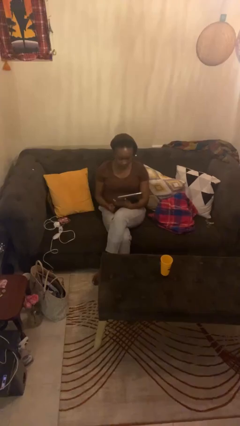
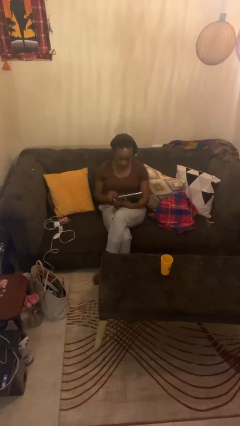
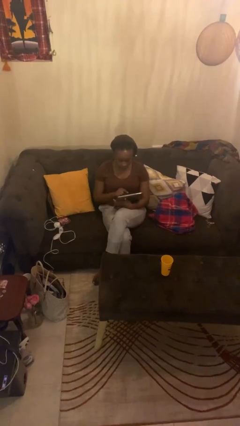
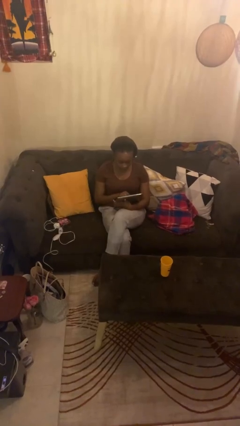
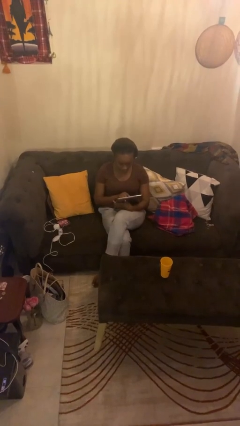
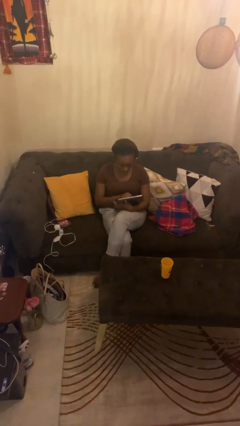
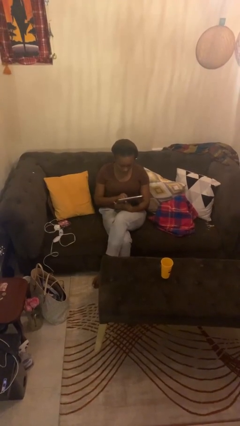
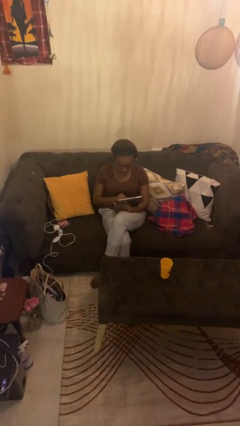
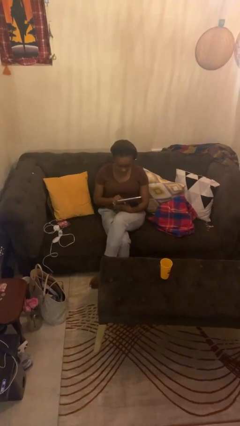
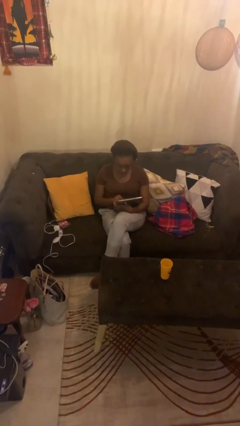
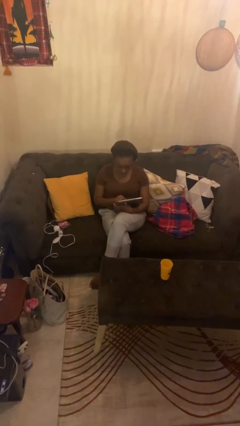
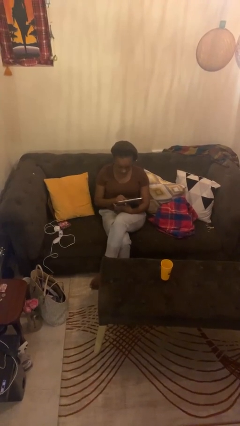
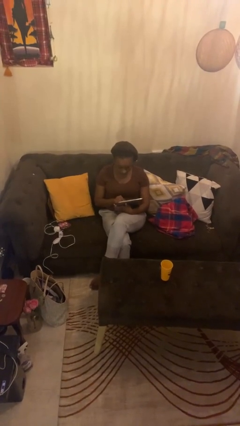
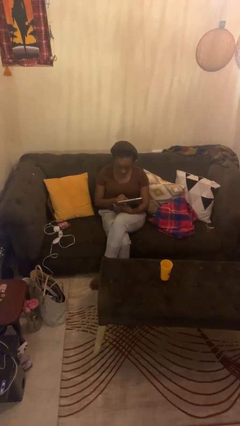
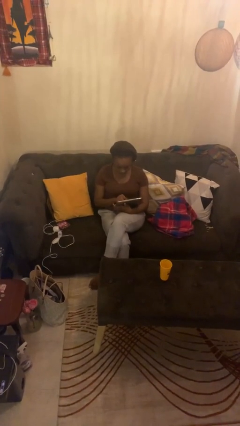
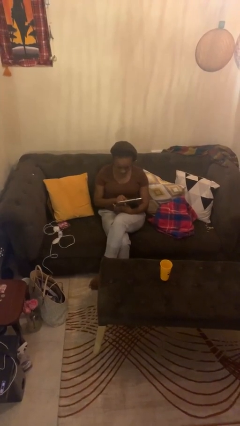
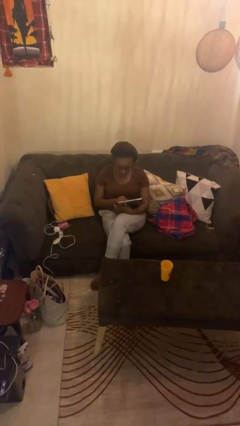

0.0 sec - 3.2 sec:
person interacts with tablet

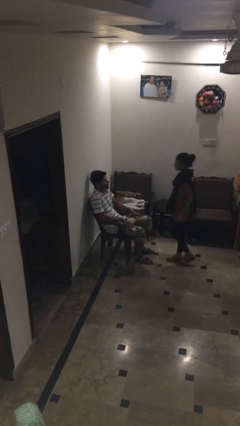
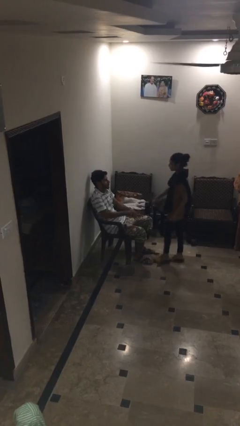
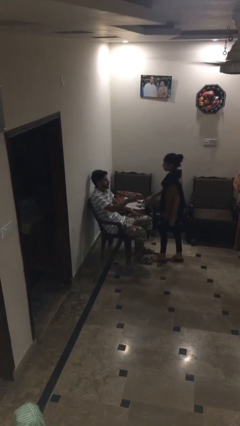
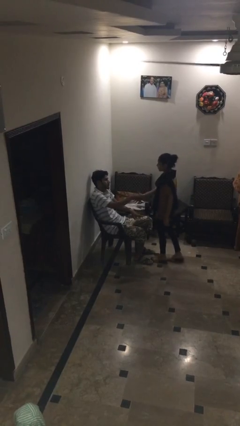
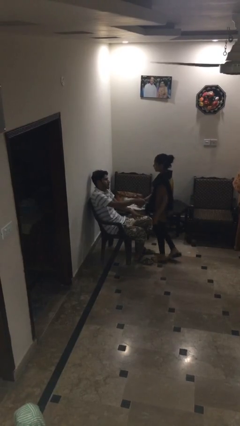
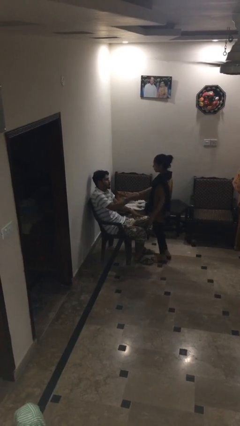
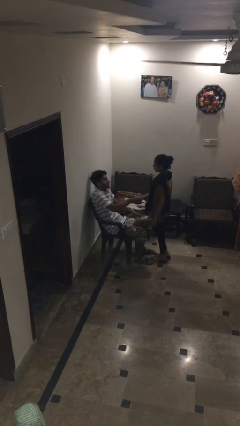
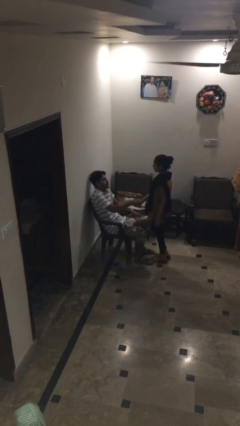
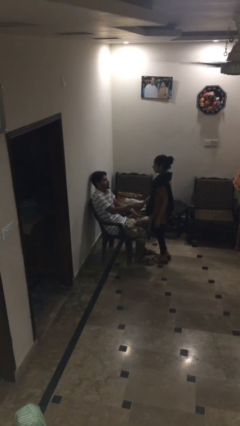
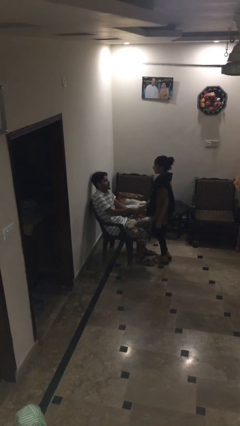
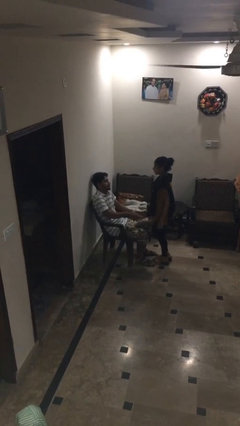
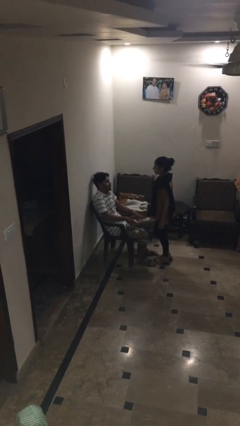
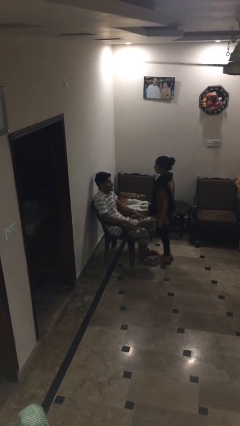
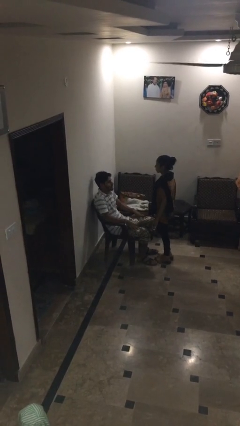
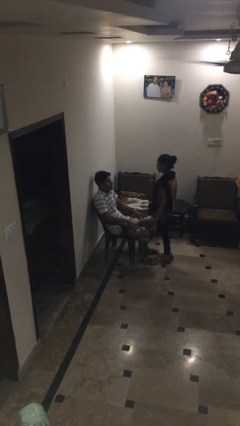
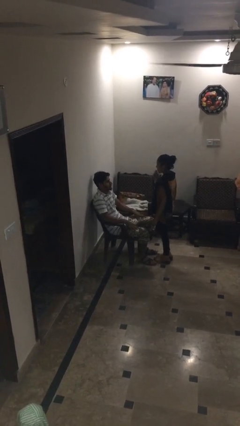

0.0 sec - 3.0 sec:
person shakes hand

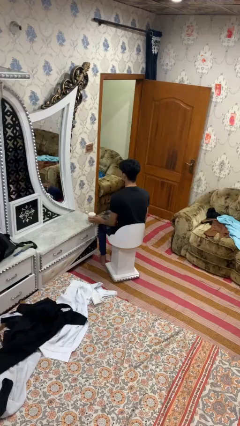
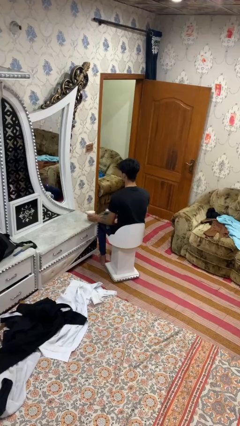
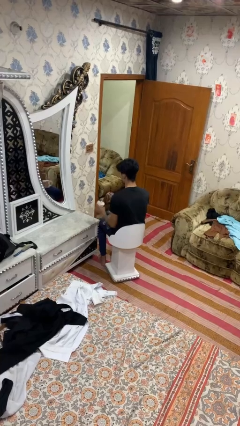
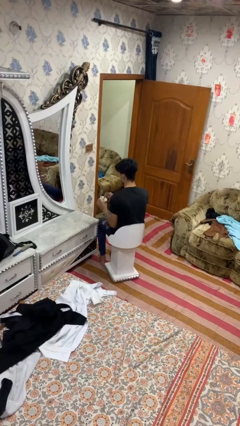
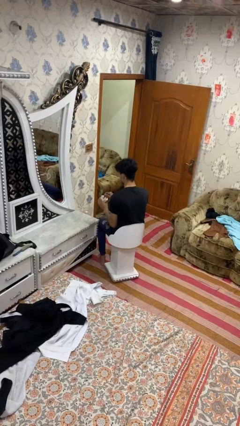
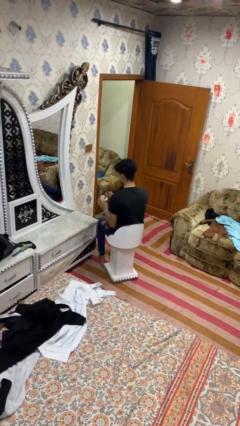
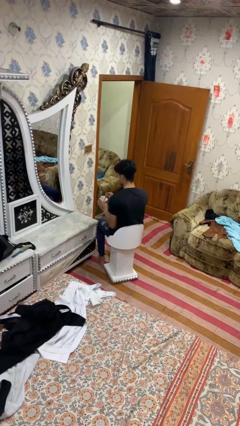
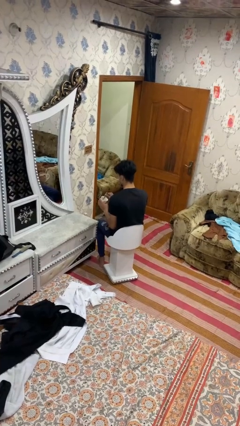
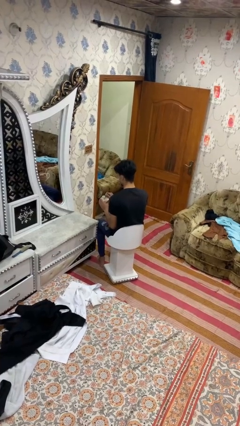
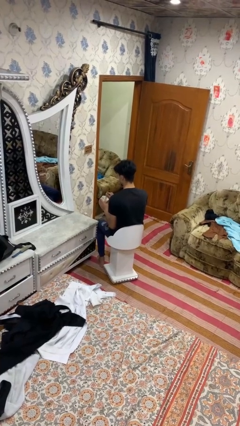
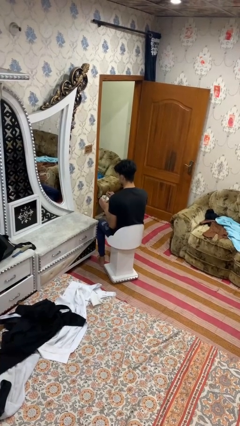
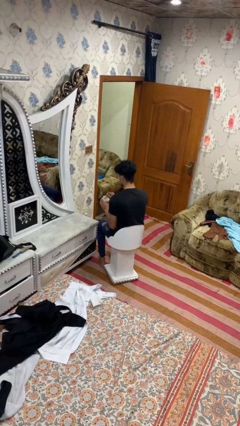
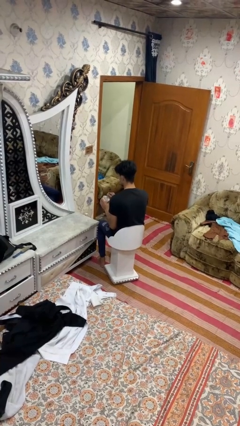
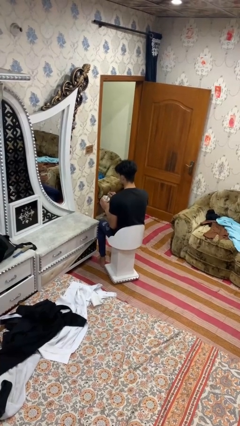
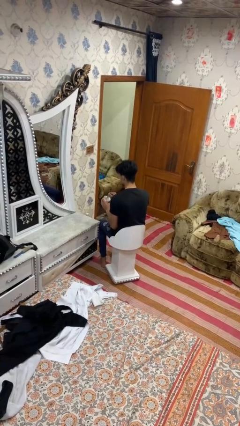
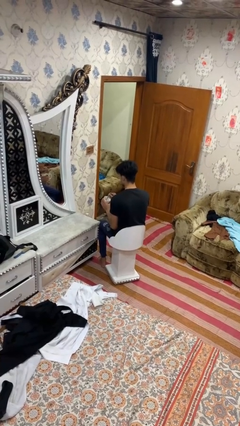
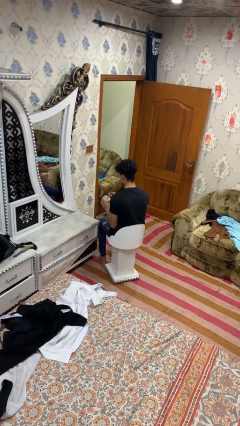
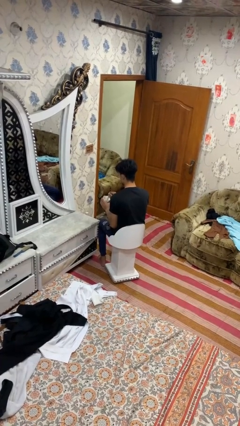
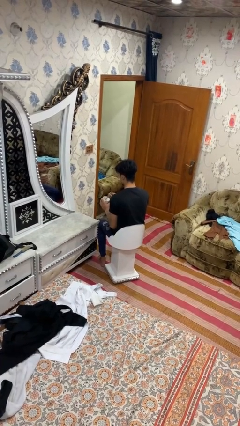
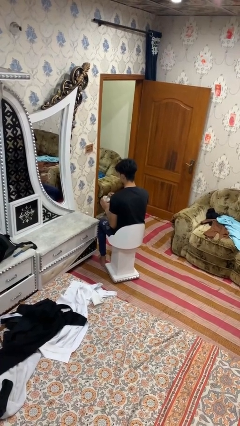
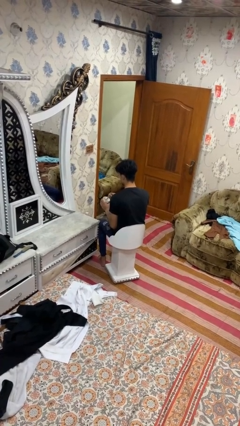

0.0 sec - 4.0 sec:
person stirs mug

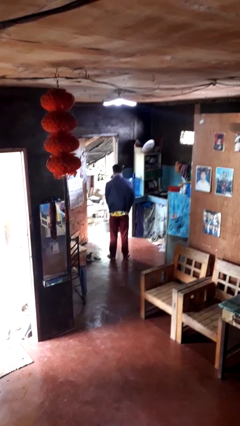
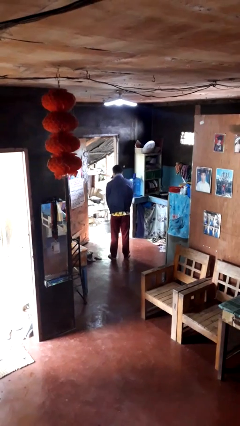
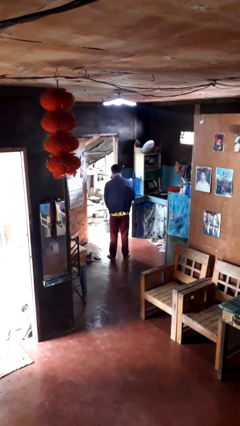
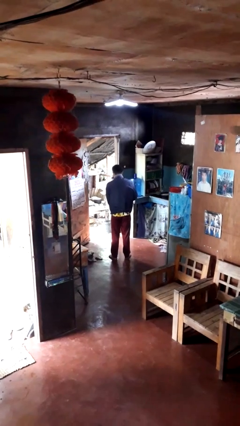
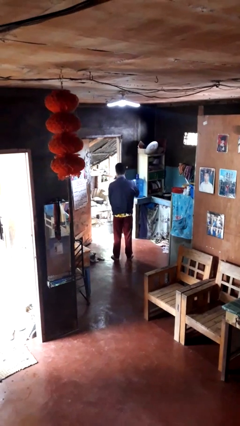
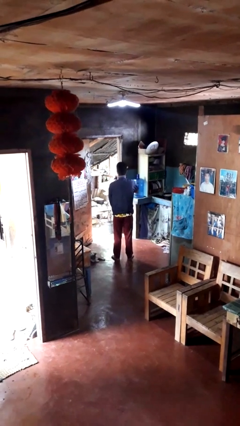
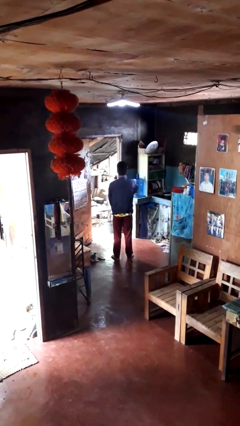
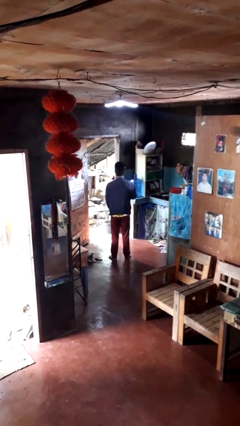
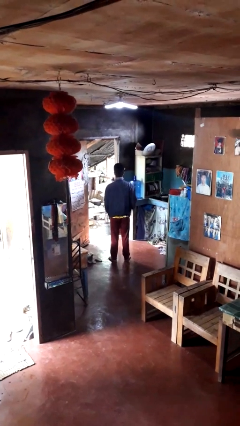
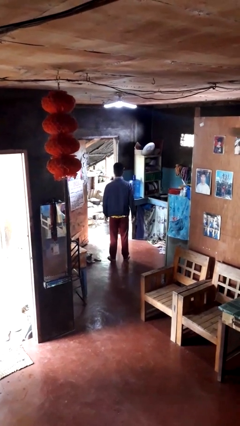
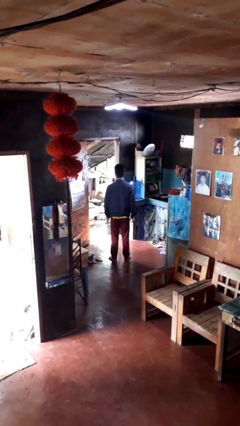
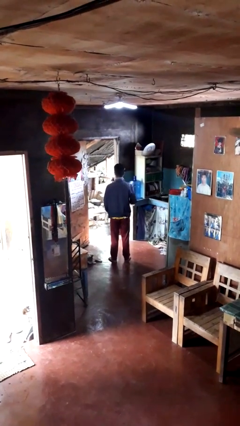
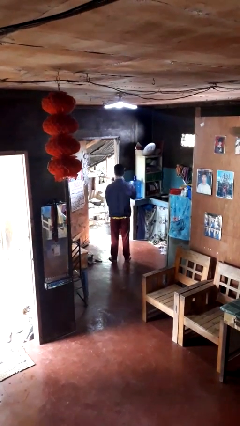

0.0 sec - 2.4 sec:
person zips up jacket

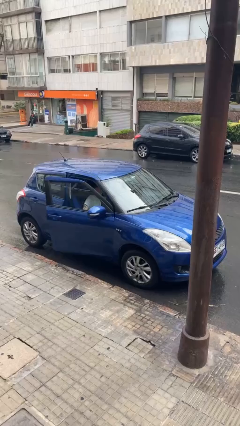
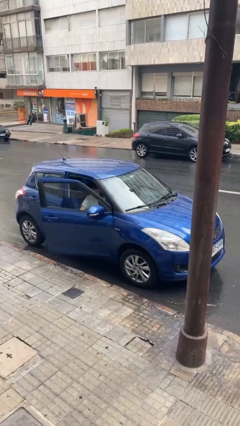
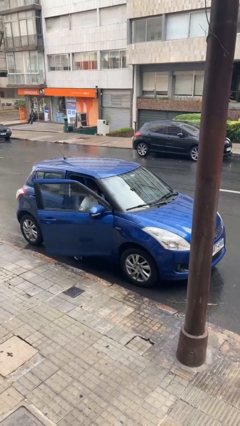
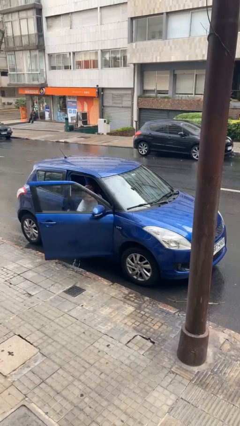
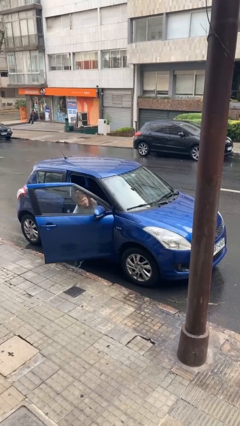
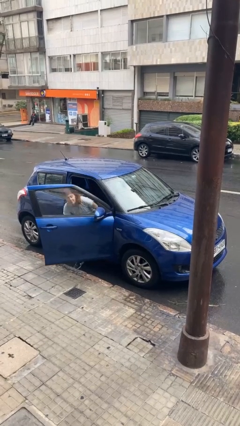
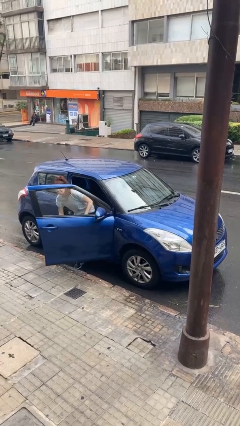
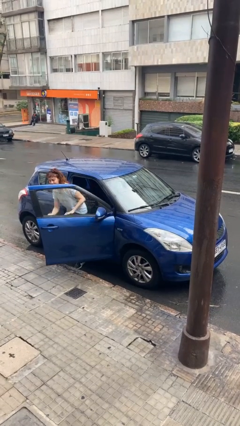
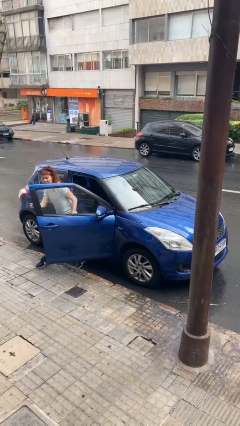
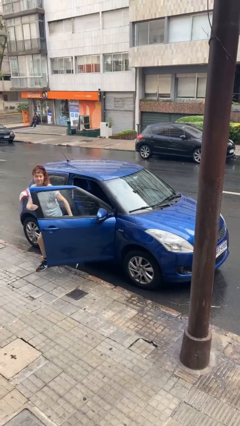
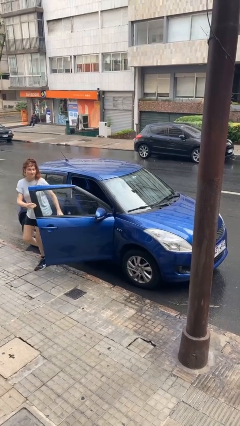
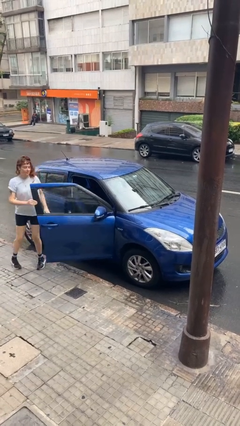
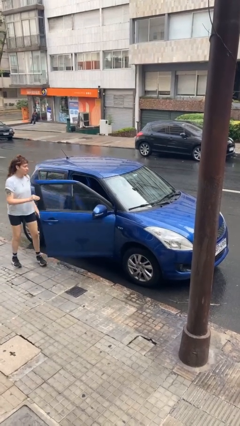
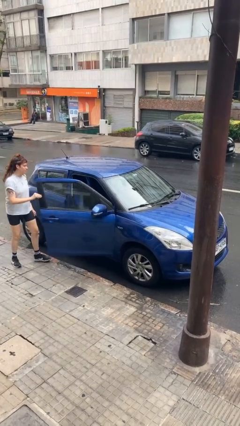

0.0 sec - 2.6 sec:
car drops off person

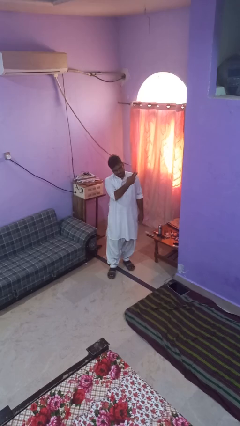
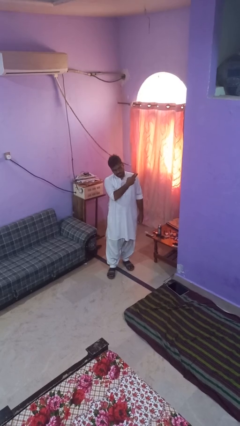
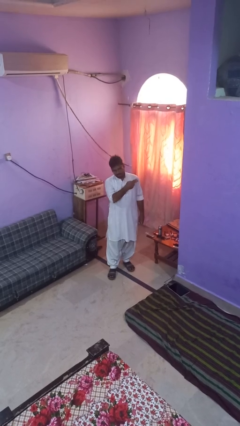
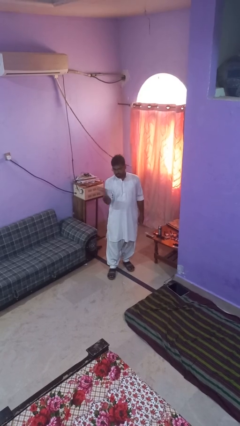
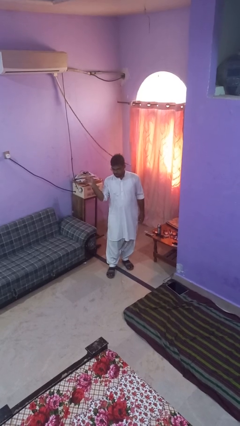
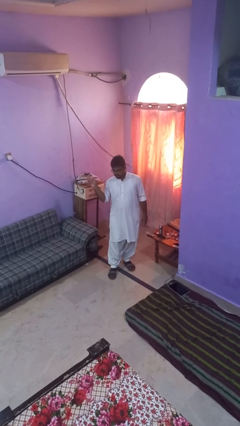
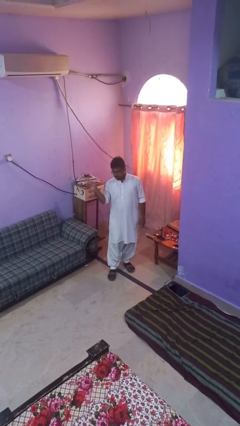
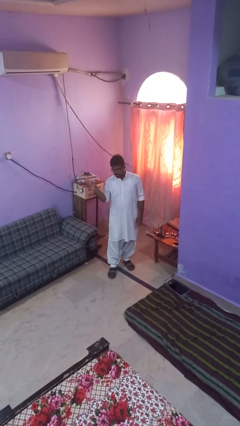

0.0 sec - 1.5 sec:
person gestures swipe right

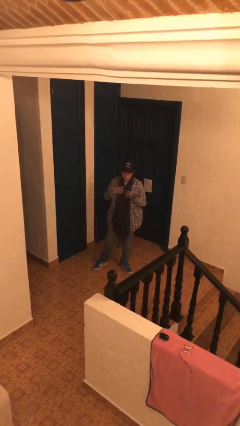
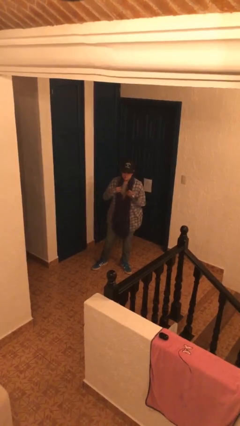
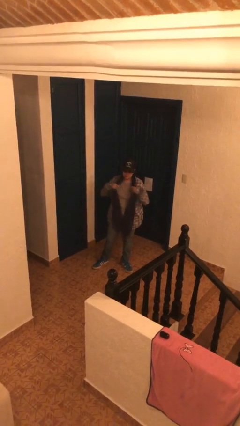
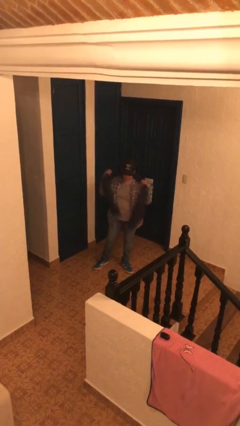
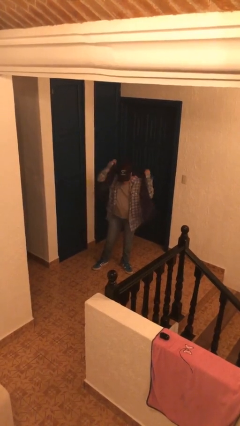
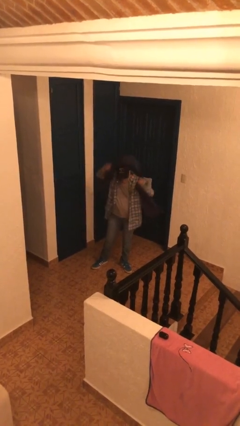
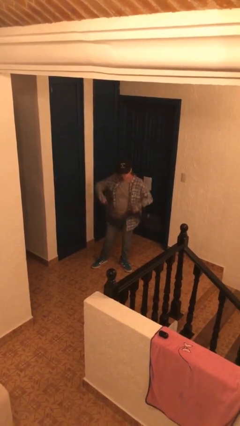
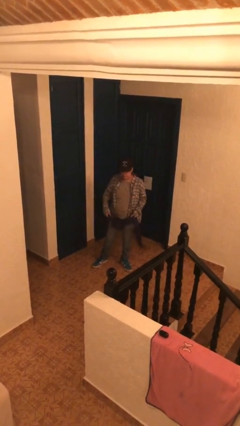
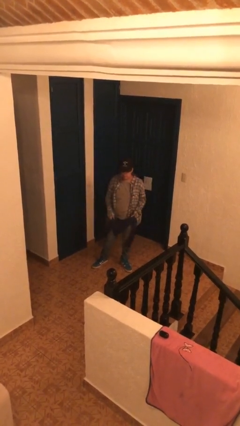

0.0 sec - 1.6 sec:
person takes off scarf
